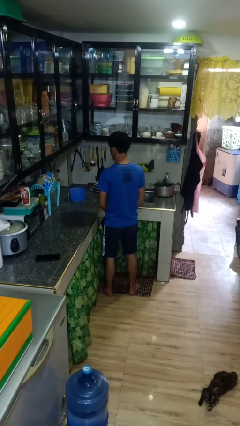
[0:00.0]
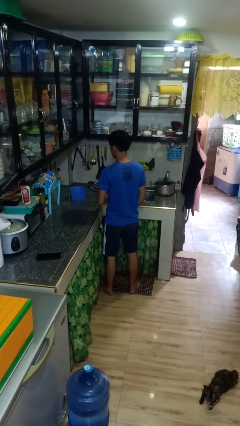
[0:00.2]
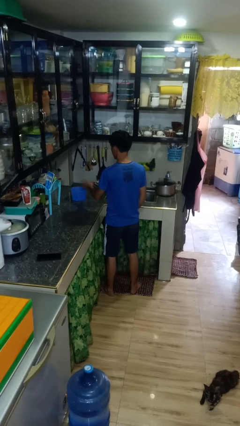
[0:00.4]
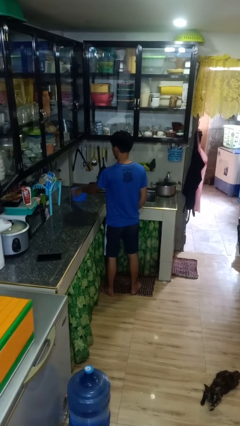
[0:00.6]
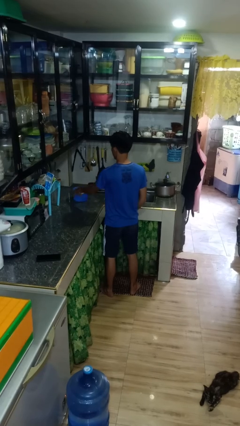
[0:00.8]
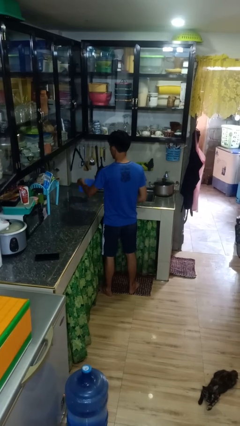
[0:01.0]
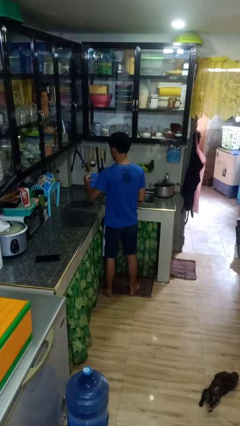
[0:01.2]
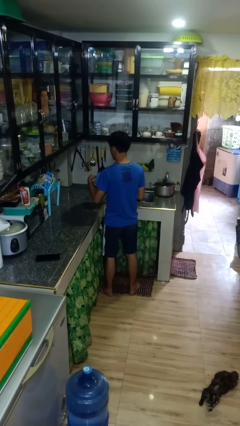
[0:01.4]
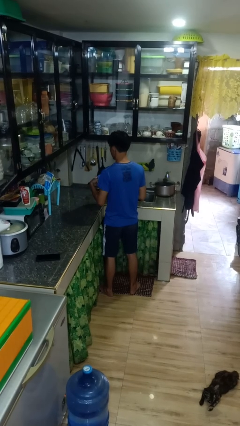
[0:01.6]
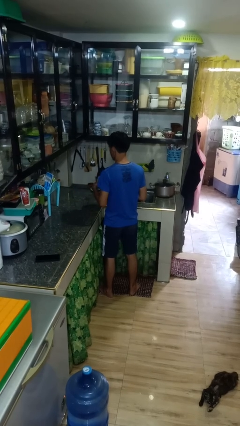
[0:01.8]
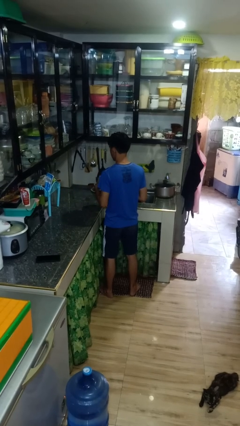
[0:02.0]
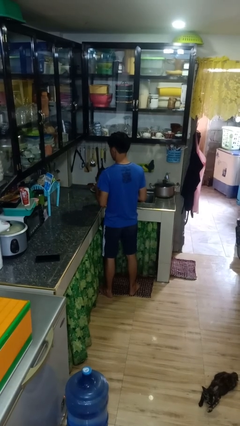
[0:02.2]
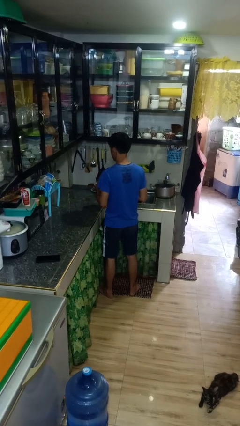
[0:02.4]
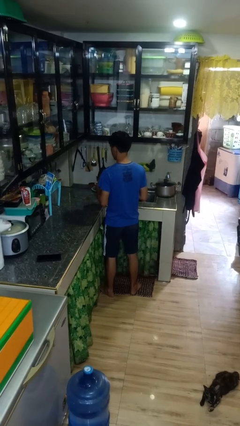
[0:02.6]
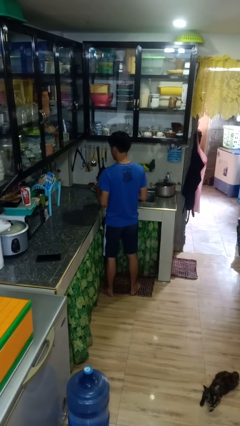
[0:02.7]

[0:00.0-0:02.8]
person picks up object from countertop

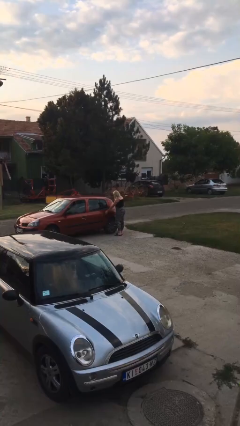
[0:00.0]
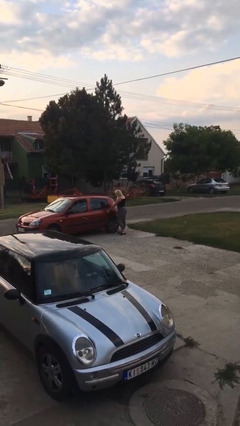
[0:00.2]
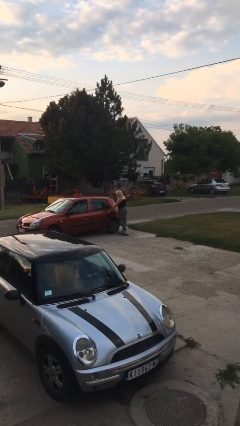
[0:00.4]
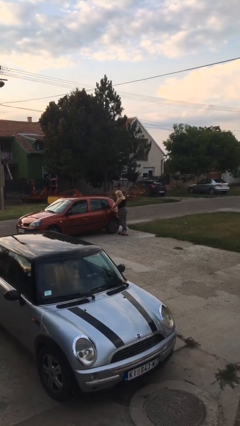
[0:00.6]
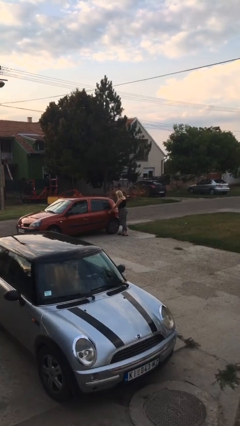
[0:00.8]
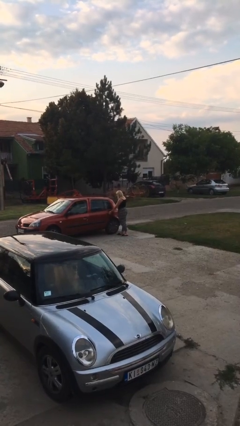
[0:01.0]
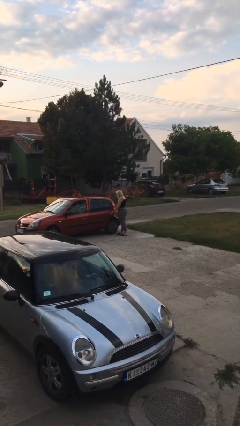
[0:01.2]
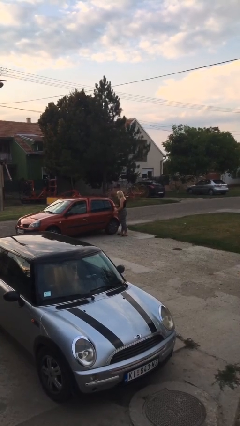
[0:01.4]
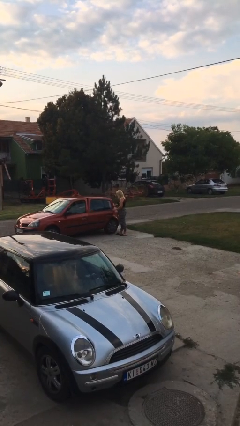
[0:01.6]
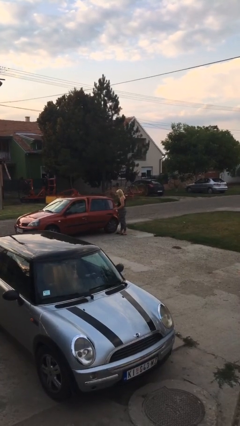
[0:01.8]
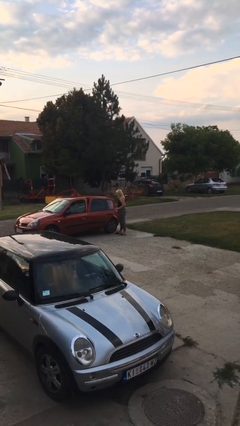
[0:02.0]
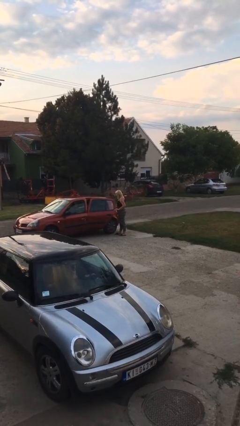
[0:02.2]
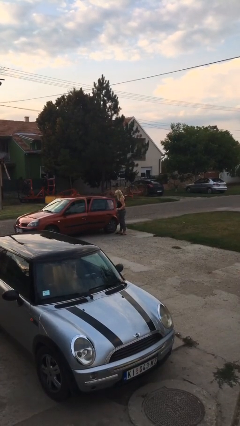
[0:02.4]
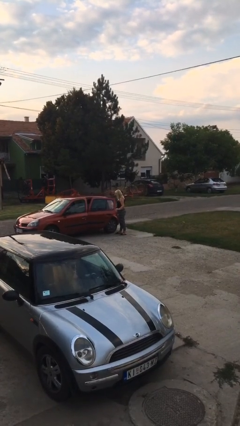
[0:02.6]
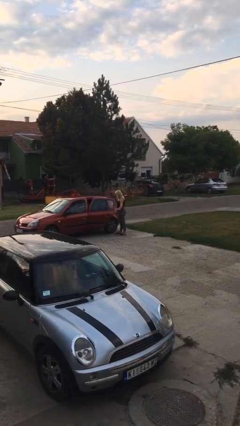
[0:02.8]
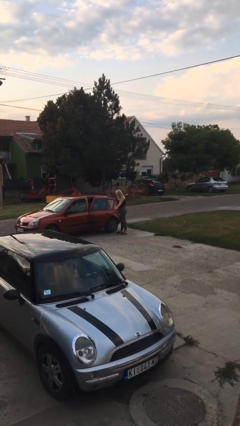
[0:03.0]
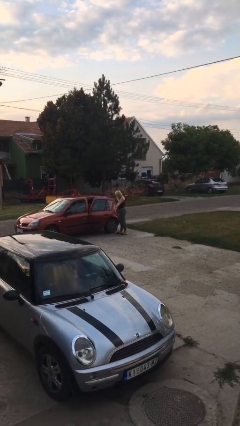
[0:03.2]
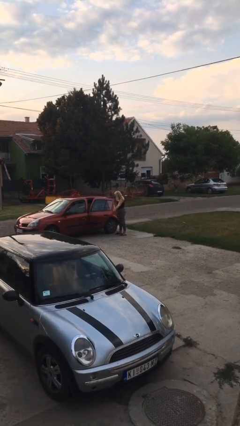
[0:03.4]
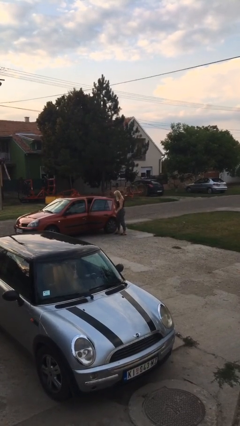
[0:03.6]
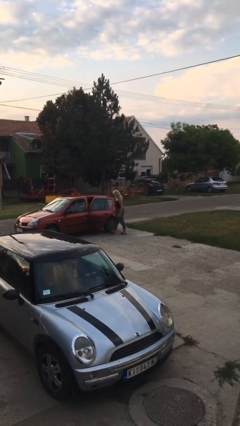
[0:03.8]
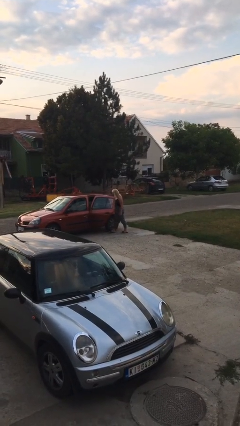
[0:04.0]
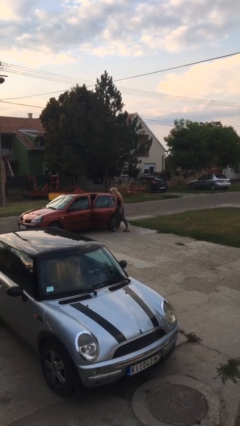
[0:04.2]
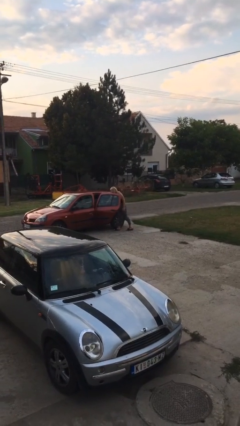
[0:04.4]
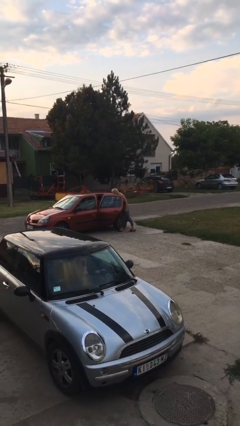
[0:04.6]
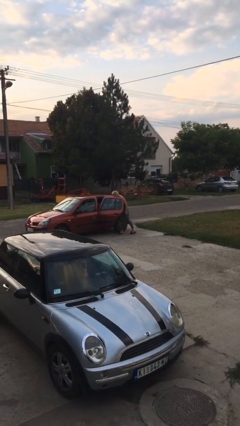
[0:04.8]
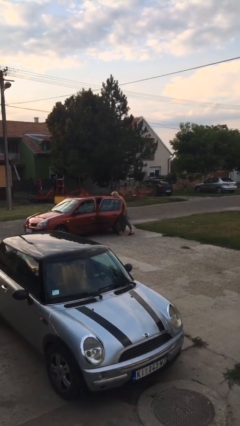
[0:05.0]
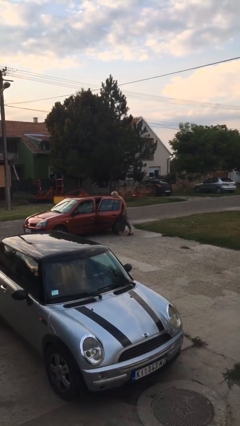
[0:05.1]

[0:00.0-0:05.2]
person opens car door

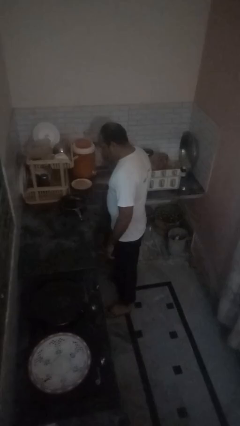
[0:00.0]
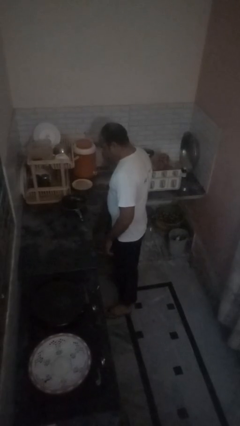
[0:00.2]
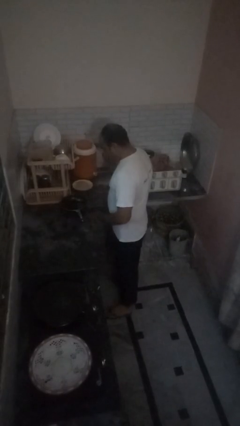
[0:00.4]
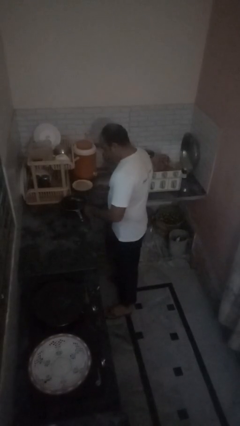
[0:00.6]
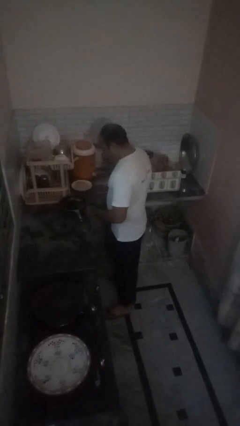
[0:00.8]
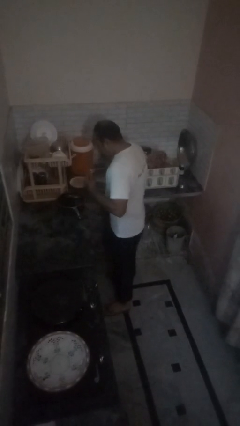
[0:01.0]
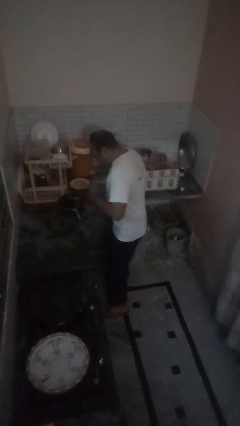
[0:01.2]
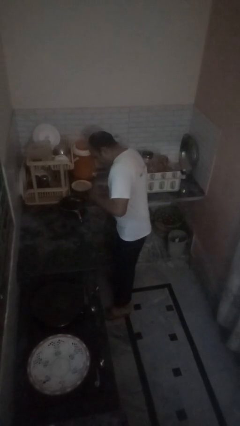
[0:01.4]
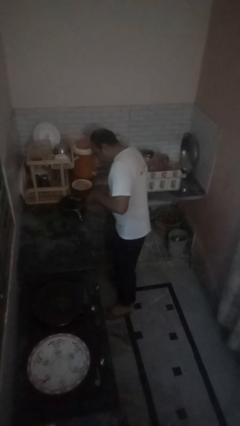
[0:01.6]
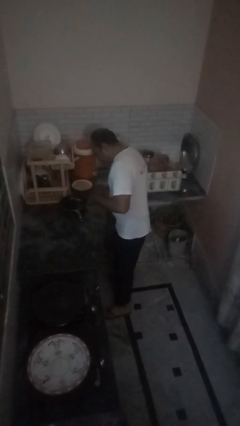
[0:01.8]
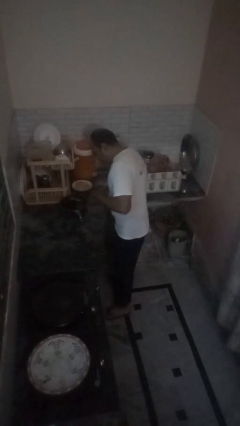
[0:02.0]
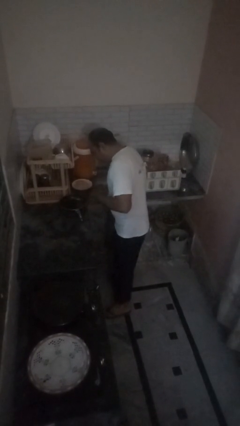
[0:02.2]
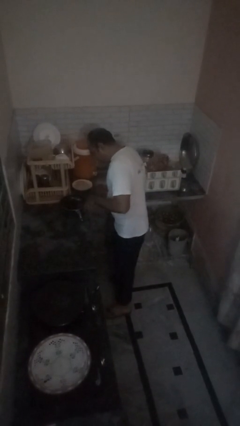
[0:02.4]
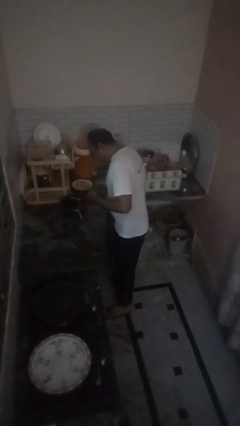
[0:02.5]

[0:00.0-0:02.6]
person burns hand

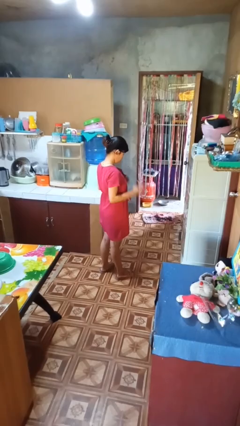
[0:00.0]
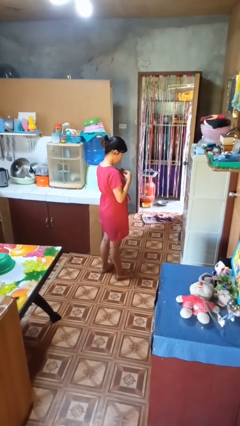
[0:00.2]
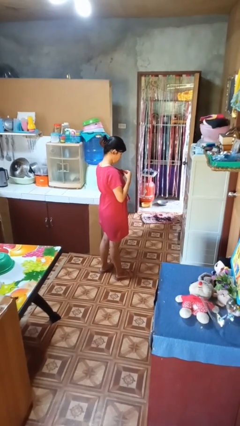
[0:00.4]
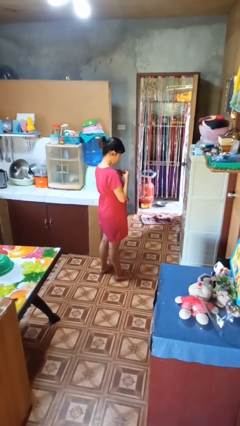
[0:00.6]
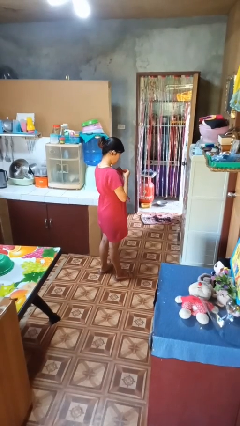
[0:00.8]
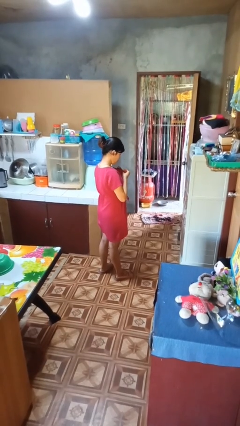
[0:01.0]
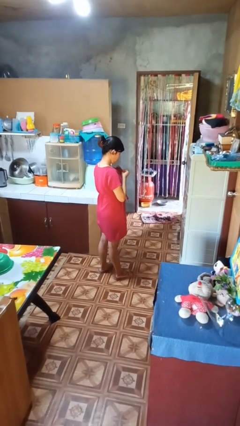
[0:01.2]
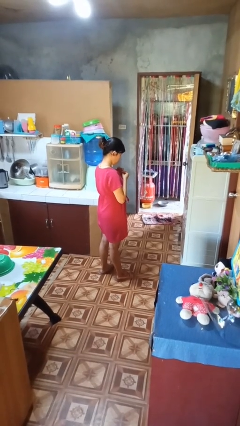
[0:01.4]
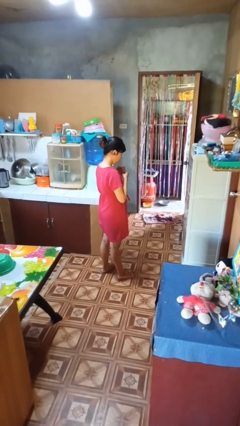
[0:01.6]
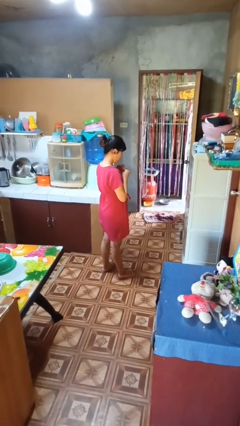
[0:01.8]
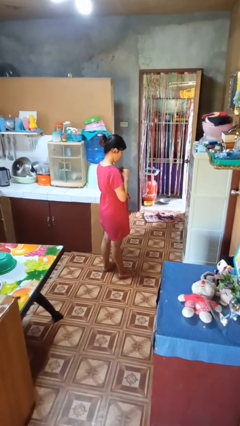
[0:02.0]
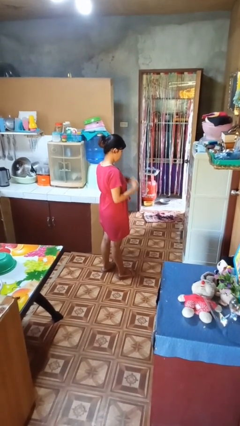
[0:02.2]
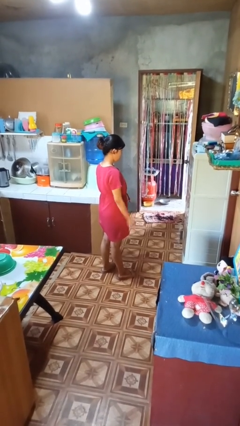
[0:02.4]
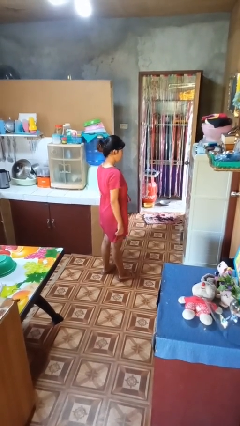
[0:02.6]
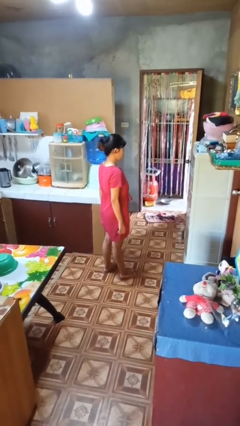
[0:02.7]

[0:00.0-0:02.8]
person buttons shirt

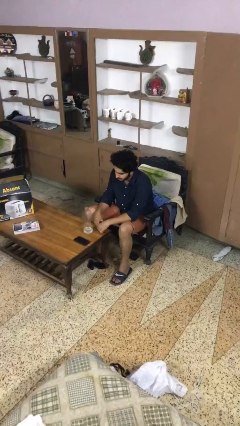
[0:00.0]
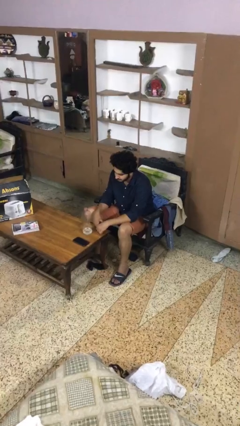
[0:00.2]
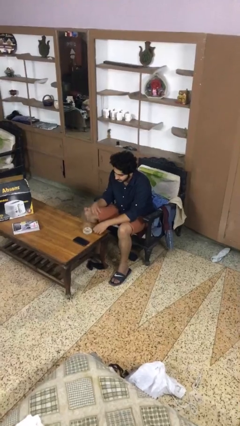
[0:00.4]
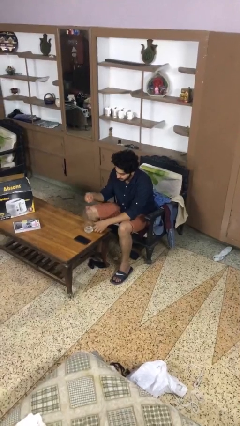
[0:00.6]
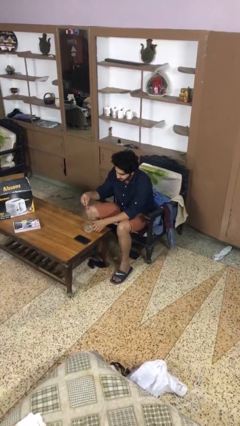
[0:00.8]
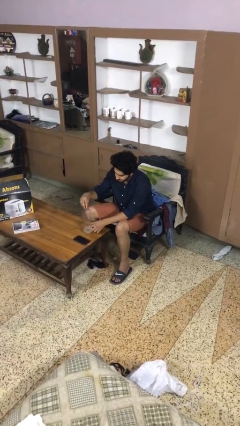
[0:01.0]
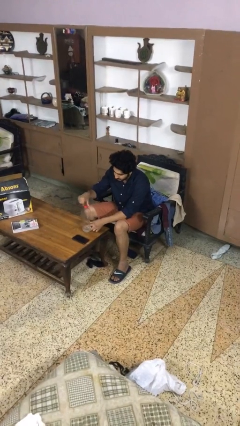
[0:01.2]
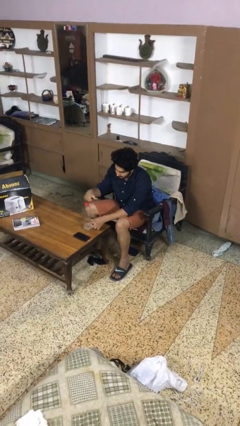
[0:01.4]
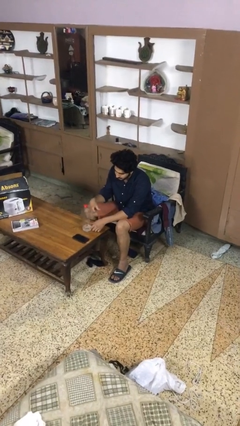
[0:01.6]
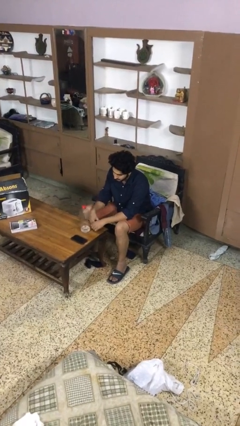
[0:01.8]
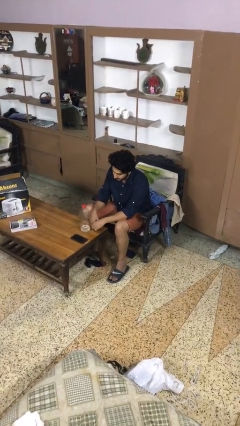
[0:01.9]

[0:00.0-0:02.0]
person screws lid to bottle

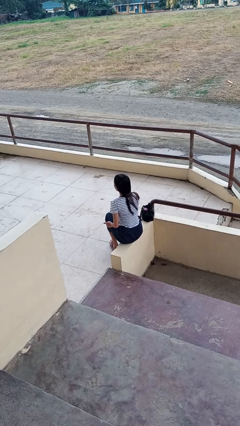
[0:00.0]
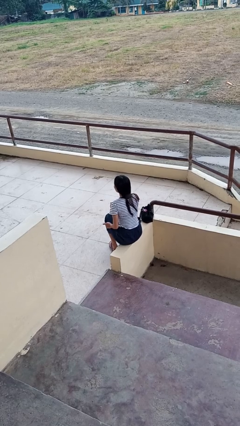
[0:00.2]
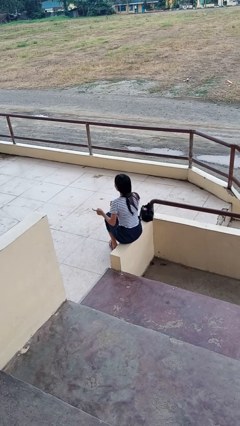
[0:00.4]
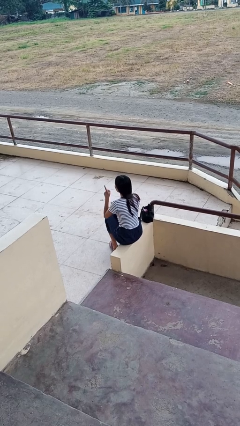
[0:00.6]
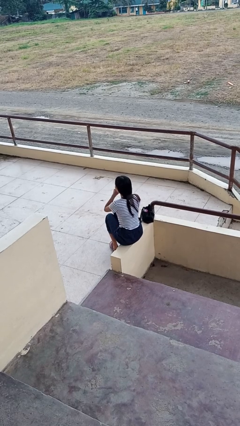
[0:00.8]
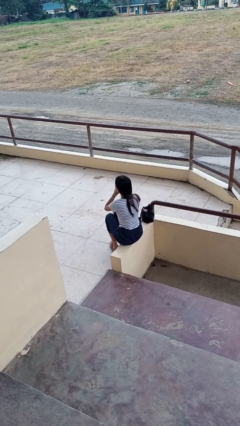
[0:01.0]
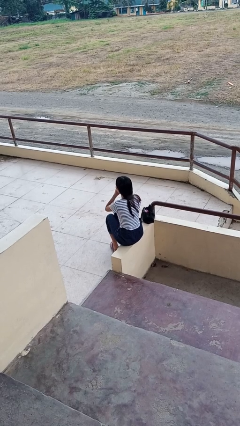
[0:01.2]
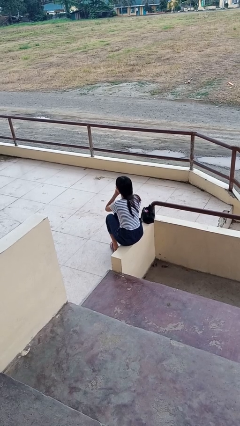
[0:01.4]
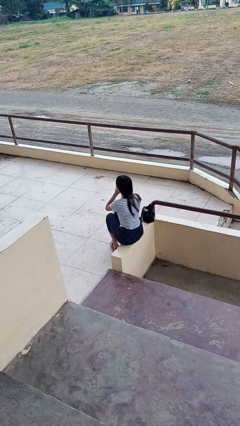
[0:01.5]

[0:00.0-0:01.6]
person gestures be quiet

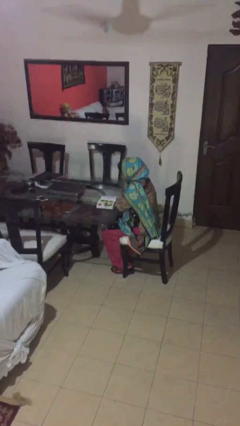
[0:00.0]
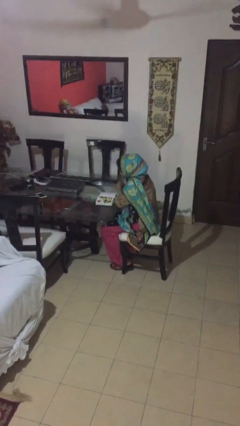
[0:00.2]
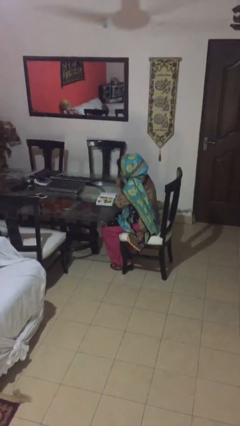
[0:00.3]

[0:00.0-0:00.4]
person reads document
